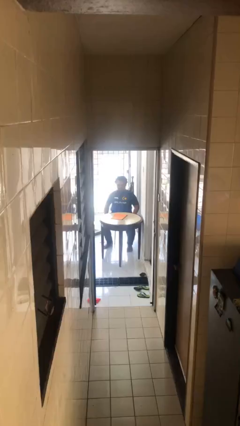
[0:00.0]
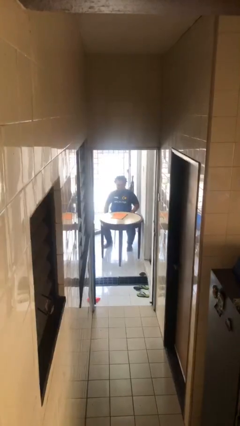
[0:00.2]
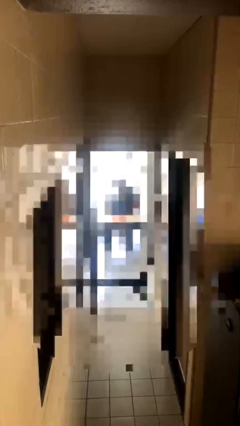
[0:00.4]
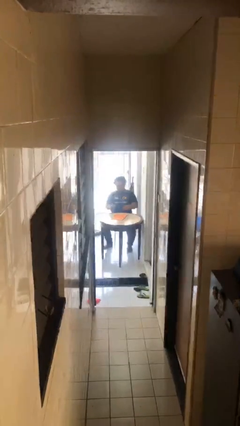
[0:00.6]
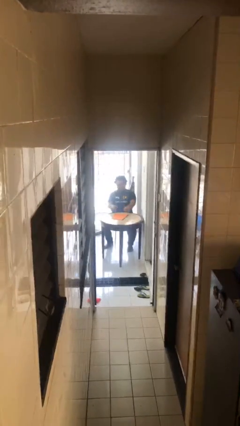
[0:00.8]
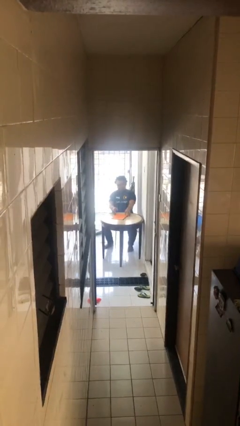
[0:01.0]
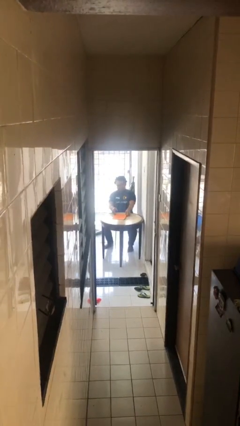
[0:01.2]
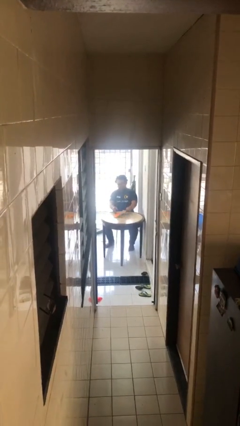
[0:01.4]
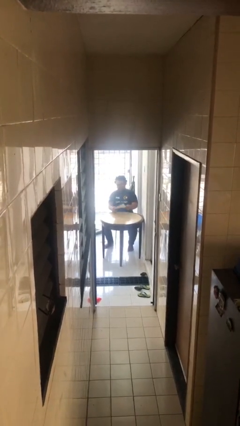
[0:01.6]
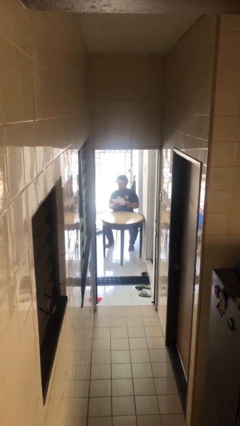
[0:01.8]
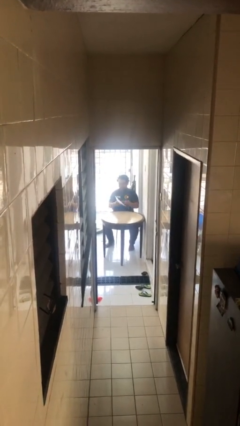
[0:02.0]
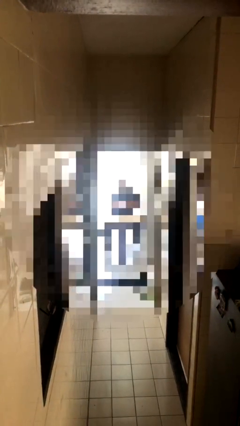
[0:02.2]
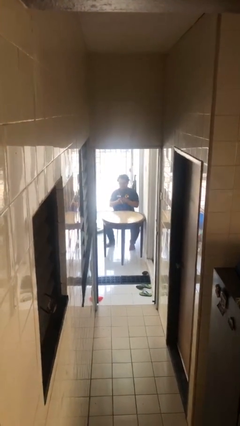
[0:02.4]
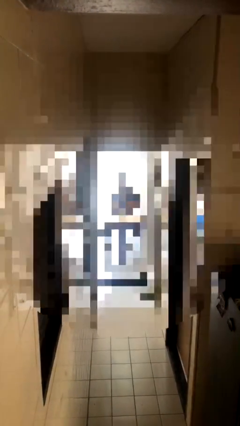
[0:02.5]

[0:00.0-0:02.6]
person picks up object from table

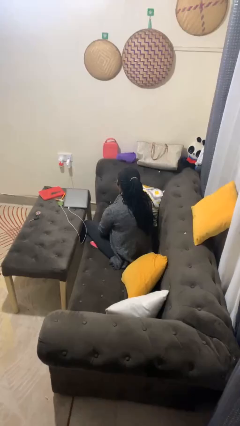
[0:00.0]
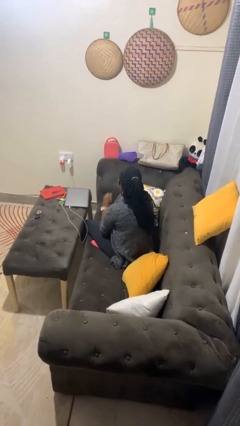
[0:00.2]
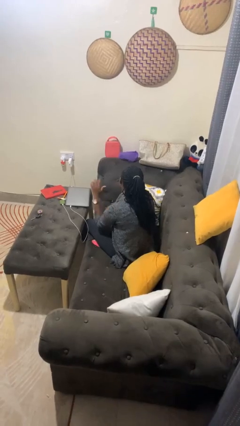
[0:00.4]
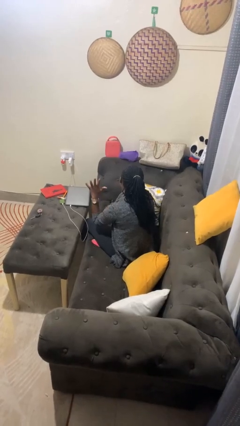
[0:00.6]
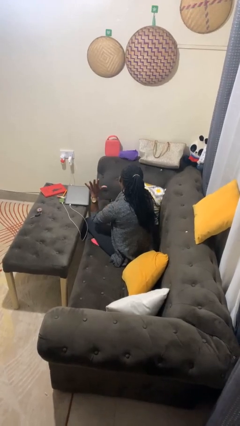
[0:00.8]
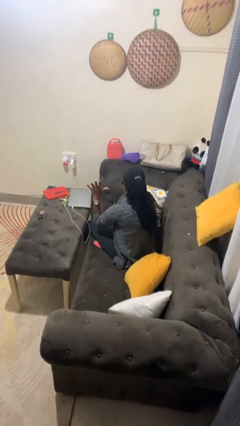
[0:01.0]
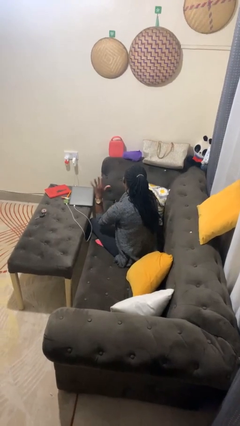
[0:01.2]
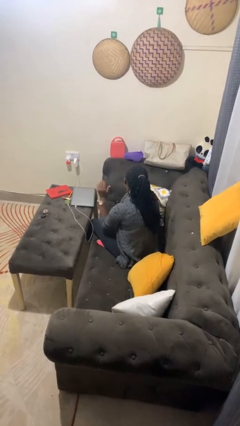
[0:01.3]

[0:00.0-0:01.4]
person gestures number five

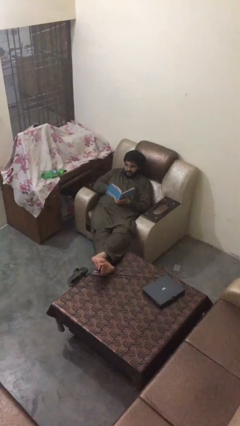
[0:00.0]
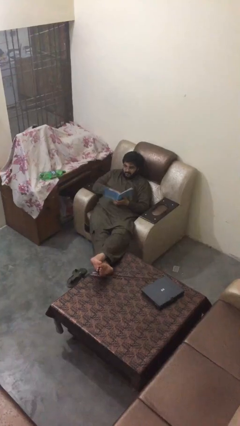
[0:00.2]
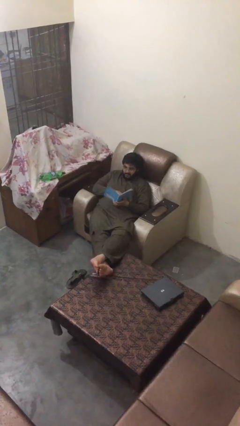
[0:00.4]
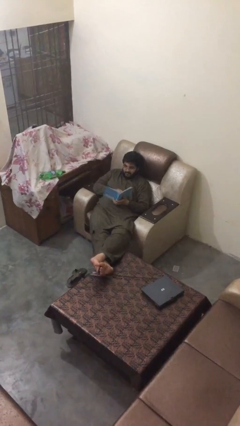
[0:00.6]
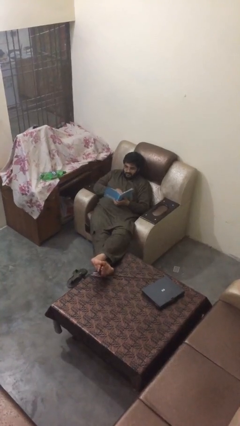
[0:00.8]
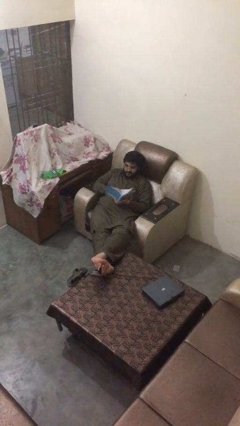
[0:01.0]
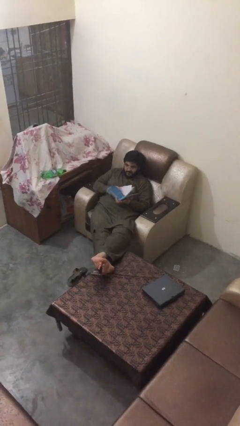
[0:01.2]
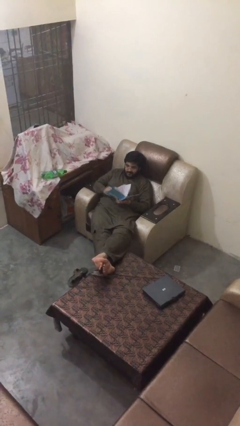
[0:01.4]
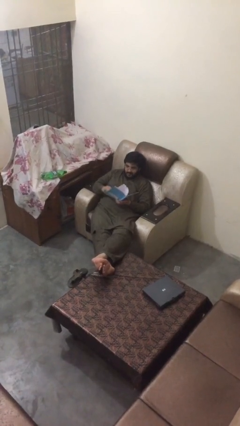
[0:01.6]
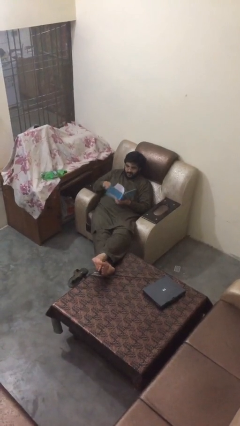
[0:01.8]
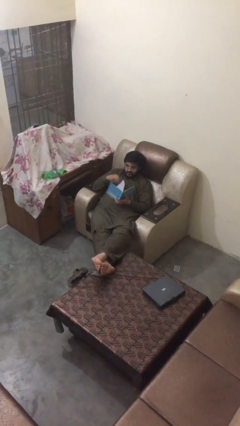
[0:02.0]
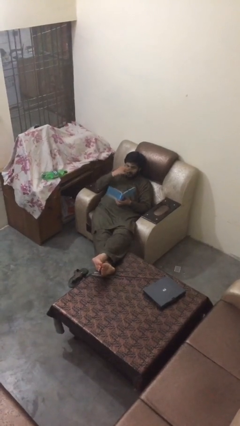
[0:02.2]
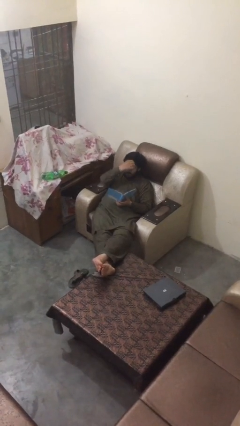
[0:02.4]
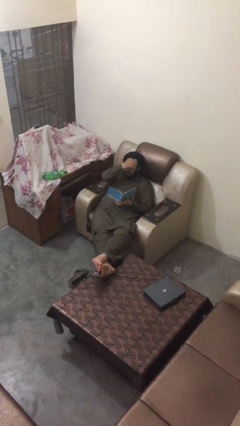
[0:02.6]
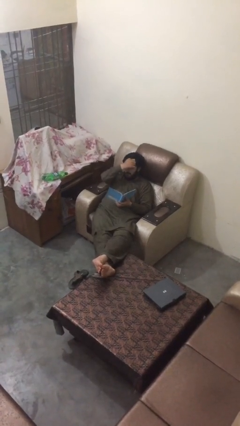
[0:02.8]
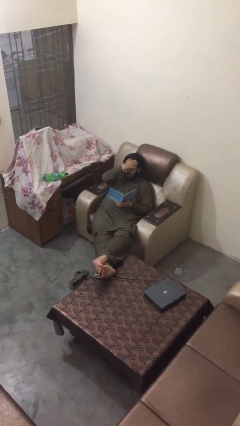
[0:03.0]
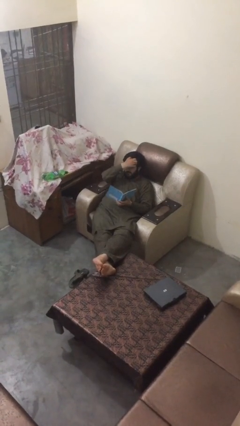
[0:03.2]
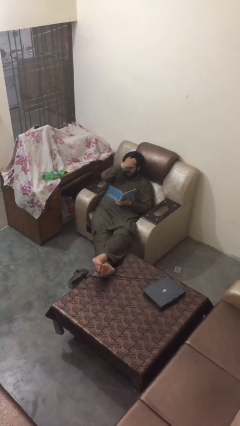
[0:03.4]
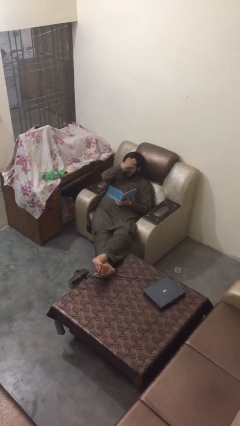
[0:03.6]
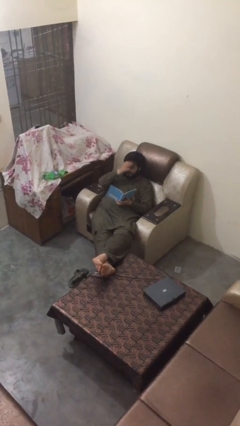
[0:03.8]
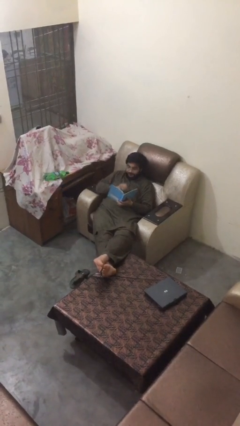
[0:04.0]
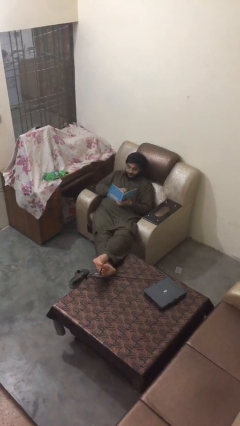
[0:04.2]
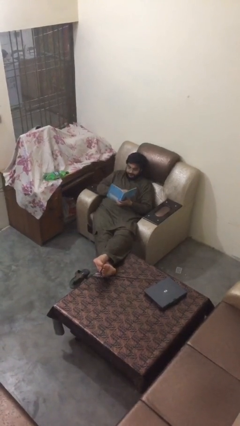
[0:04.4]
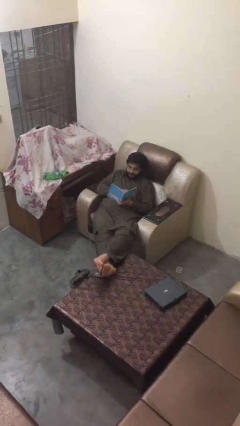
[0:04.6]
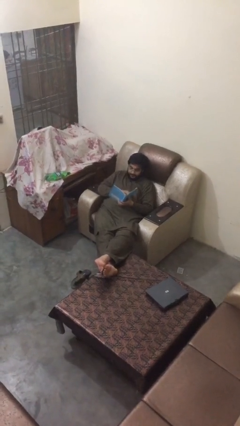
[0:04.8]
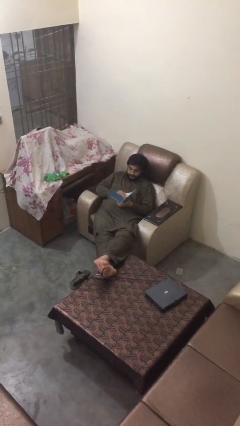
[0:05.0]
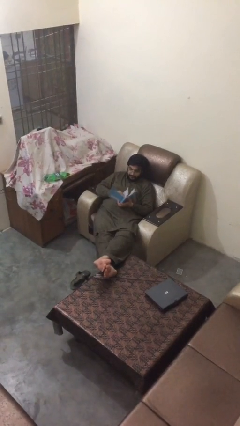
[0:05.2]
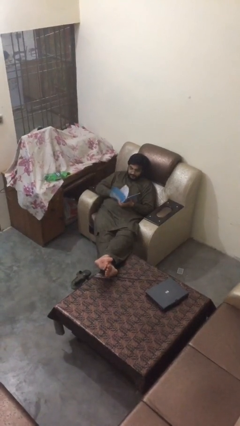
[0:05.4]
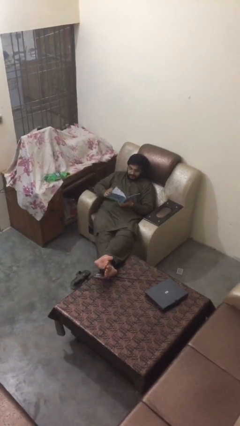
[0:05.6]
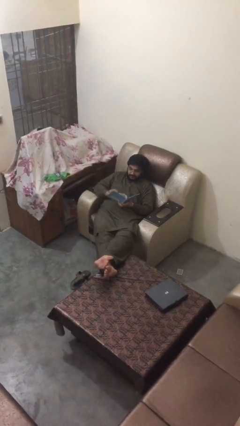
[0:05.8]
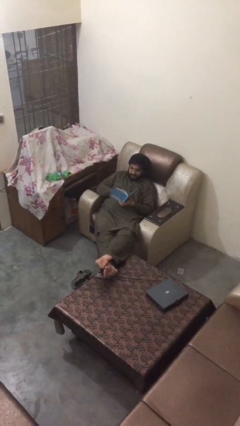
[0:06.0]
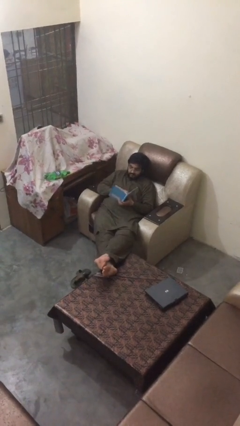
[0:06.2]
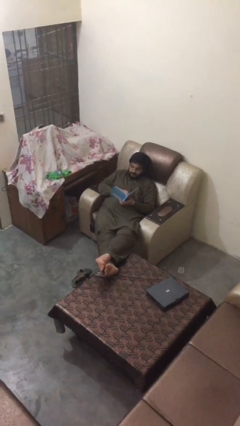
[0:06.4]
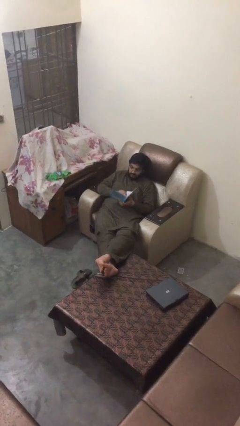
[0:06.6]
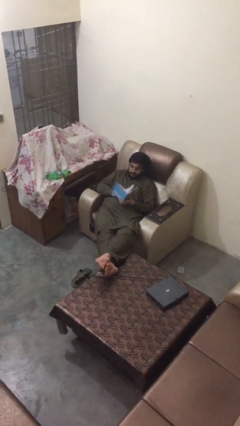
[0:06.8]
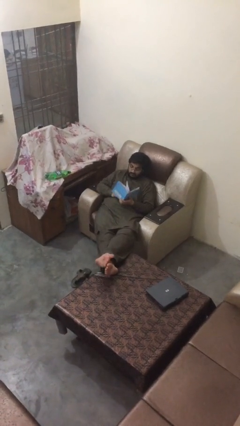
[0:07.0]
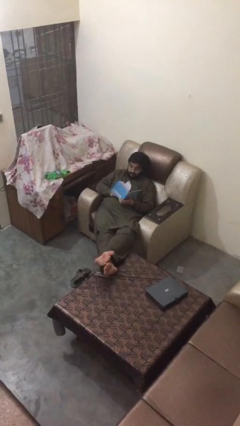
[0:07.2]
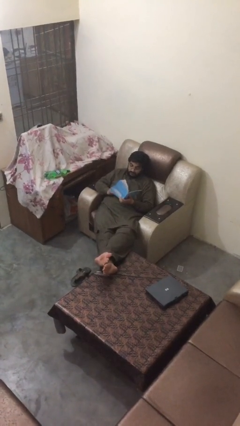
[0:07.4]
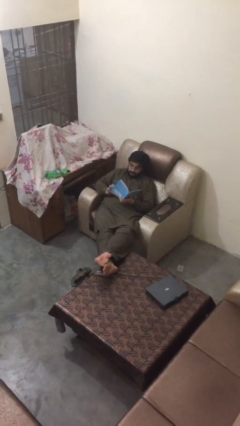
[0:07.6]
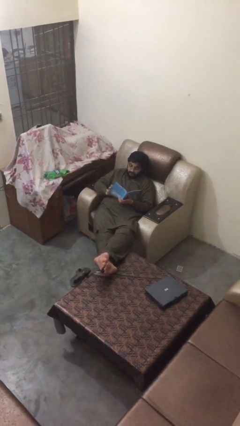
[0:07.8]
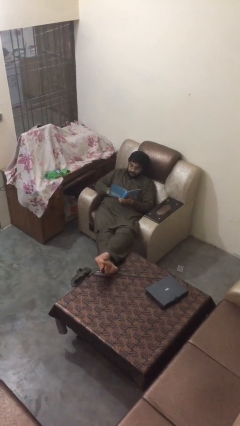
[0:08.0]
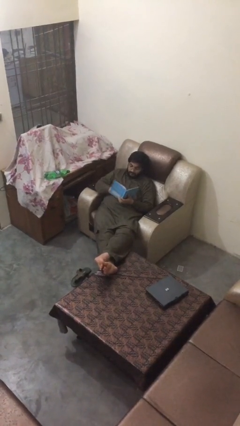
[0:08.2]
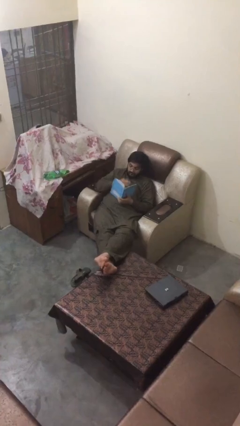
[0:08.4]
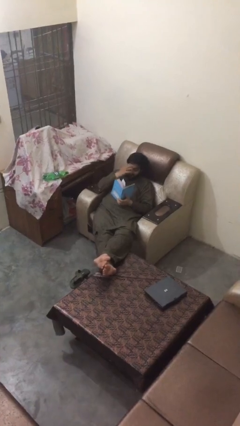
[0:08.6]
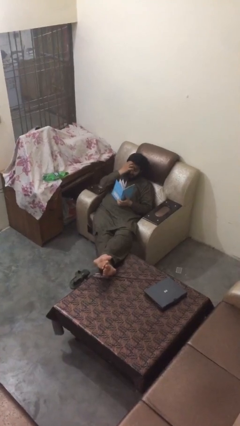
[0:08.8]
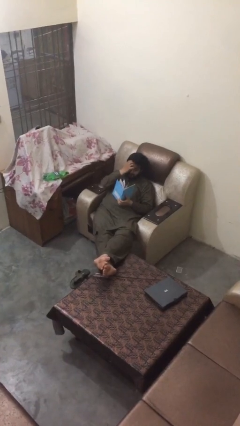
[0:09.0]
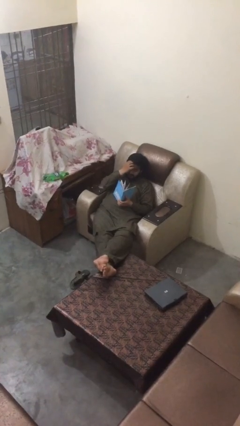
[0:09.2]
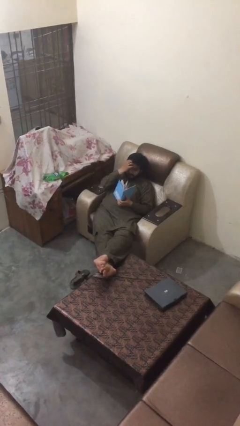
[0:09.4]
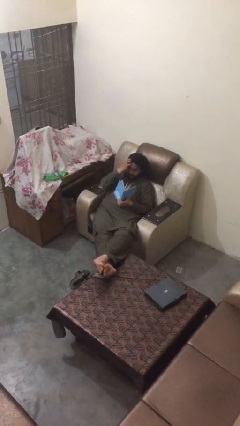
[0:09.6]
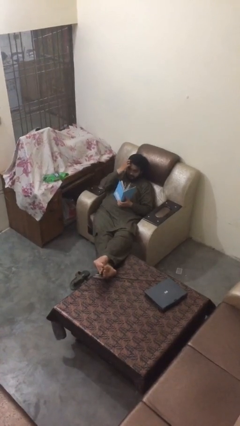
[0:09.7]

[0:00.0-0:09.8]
person reads document

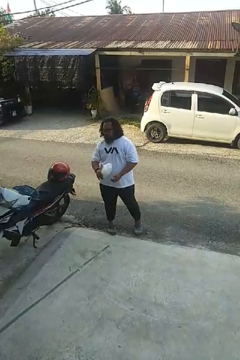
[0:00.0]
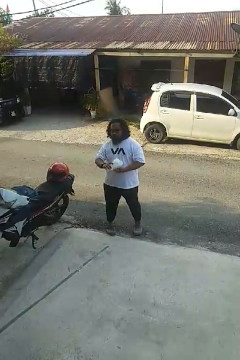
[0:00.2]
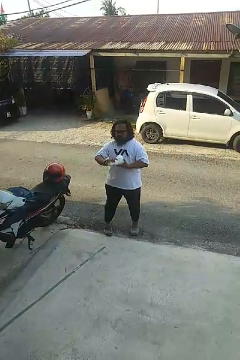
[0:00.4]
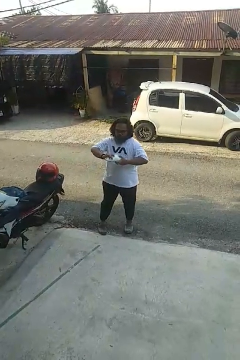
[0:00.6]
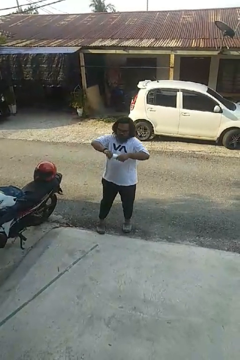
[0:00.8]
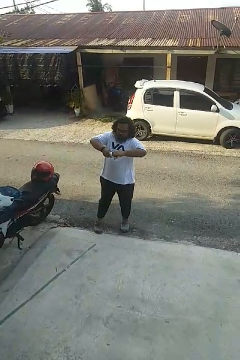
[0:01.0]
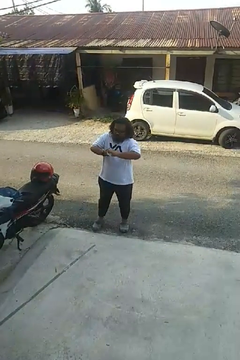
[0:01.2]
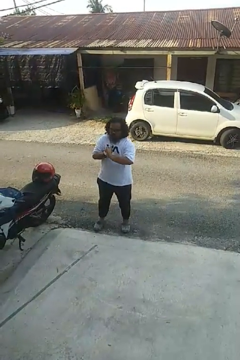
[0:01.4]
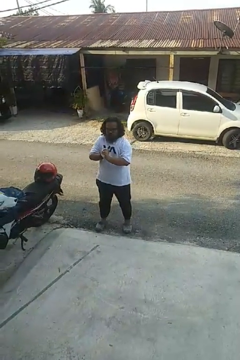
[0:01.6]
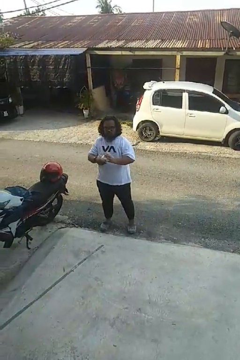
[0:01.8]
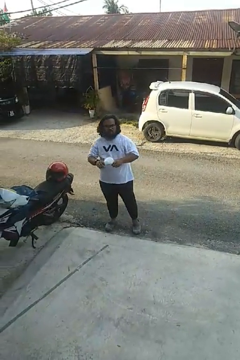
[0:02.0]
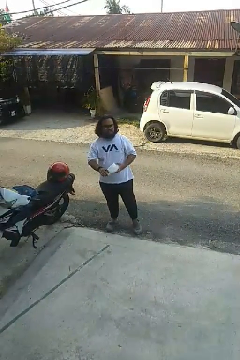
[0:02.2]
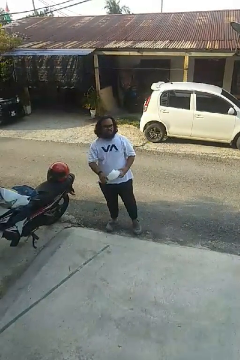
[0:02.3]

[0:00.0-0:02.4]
person squeezes object

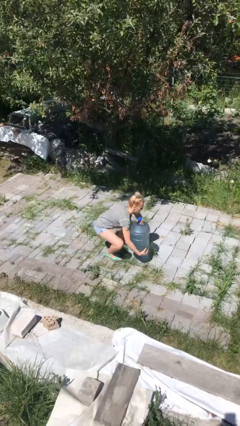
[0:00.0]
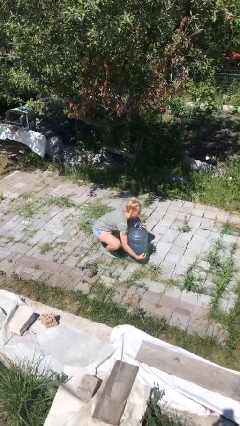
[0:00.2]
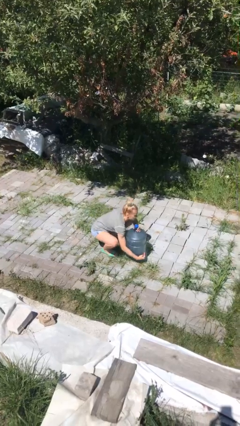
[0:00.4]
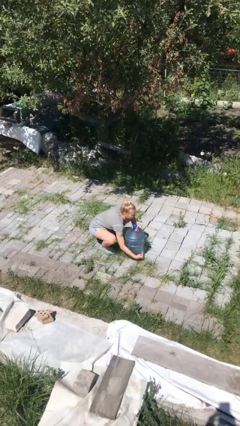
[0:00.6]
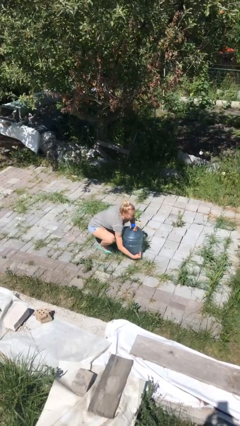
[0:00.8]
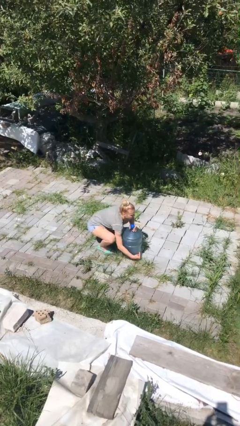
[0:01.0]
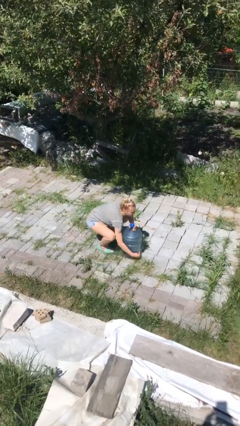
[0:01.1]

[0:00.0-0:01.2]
person puts down object on floor

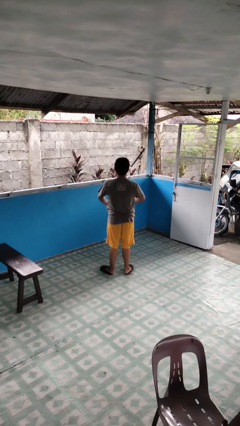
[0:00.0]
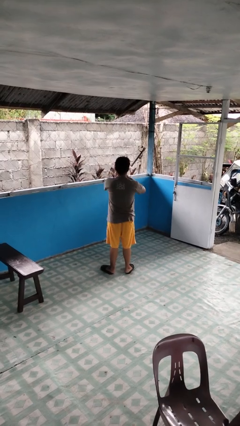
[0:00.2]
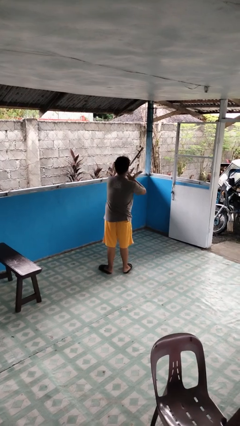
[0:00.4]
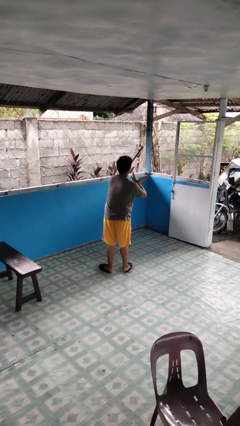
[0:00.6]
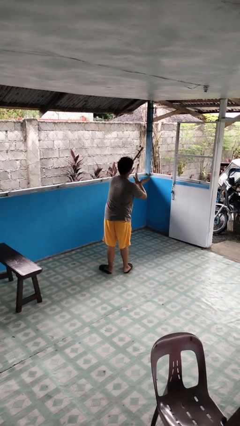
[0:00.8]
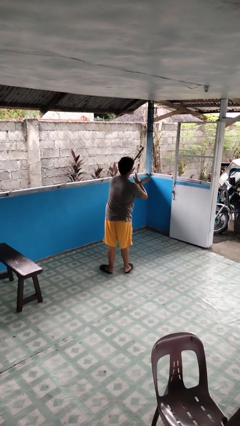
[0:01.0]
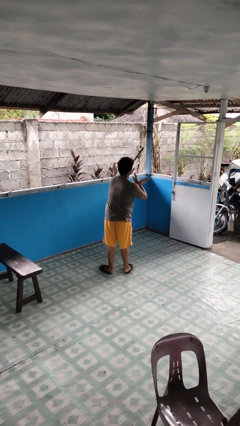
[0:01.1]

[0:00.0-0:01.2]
person gestures arms x
